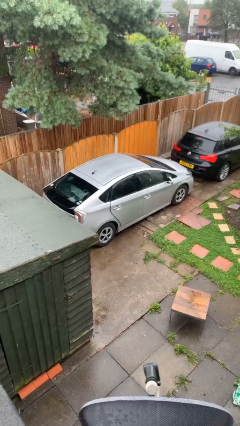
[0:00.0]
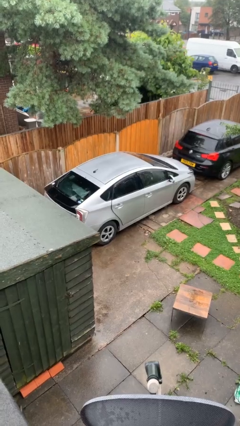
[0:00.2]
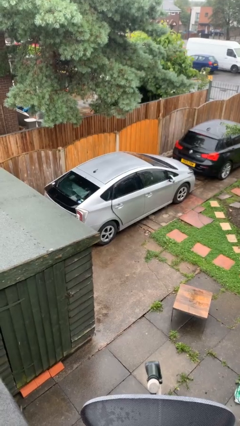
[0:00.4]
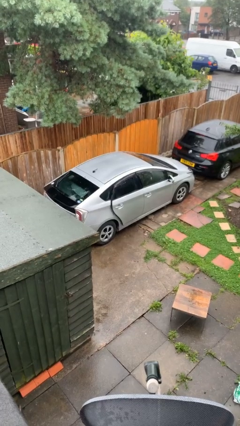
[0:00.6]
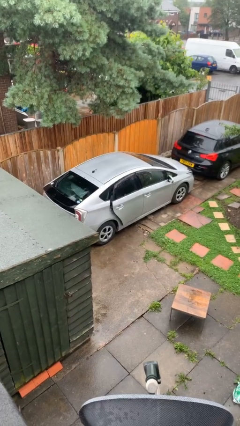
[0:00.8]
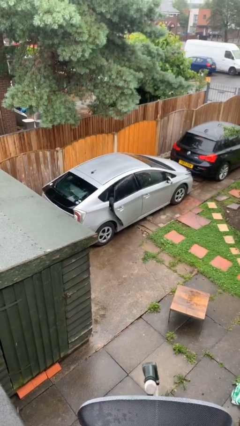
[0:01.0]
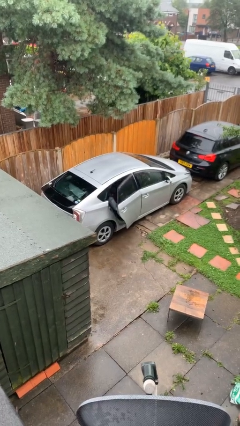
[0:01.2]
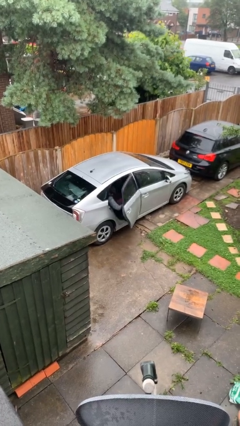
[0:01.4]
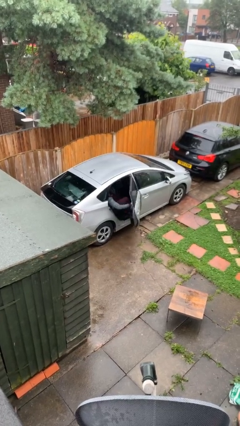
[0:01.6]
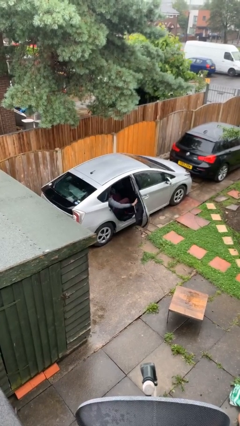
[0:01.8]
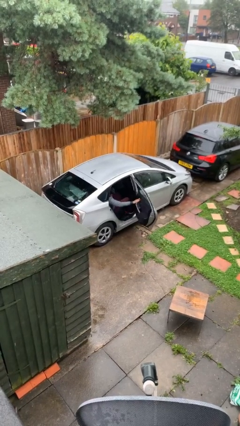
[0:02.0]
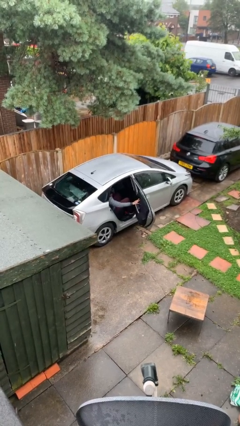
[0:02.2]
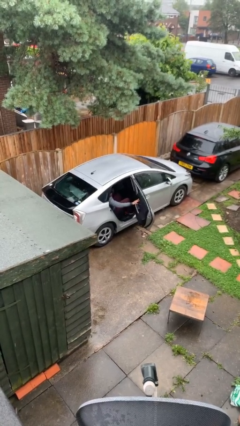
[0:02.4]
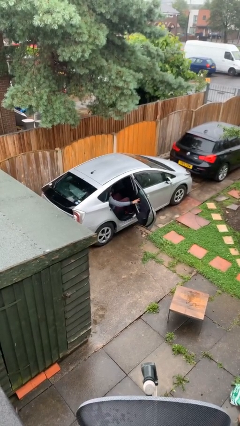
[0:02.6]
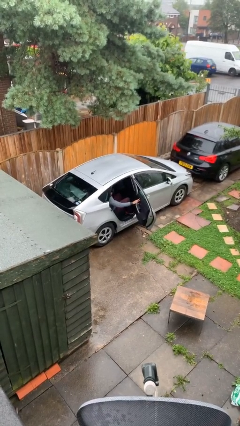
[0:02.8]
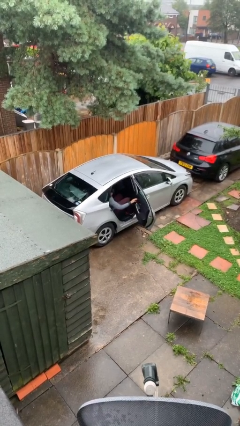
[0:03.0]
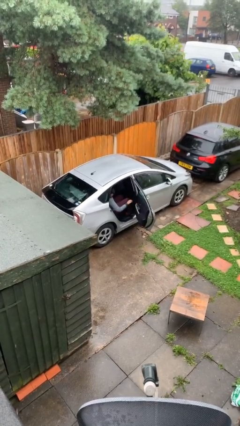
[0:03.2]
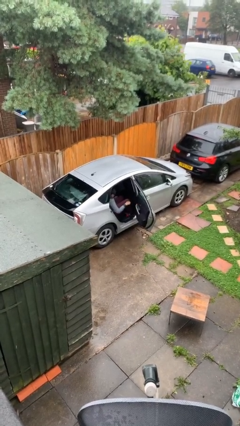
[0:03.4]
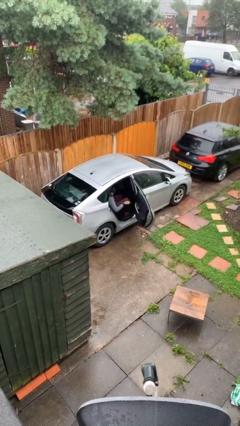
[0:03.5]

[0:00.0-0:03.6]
person opens car door

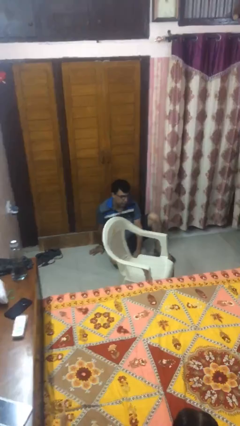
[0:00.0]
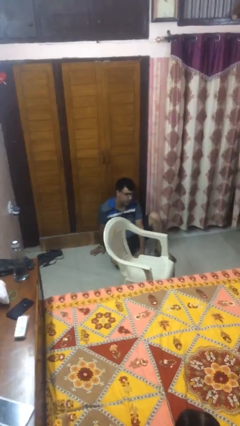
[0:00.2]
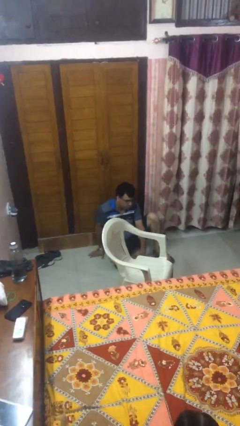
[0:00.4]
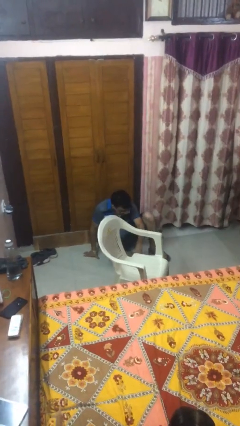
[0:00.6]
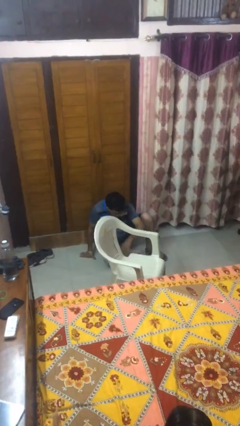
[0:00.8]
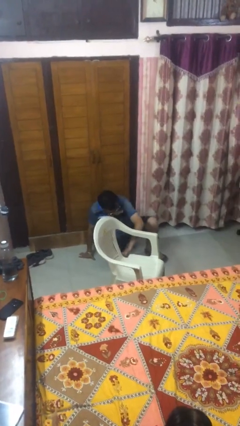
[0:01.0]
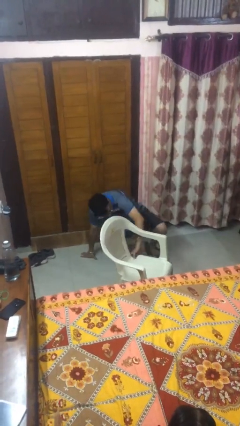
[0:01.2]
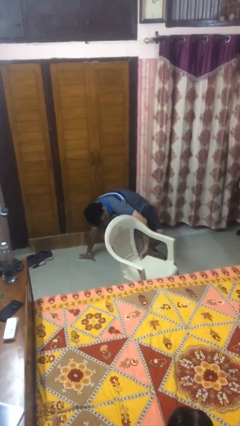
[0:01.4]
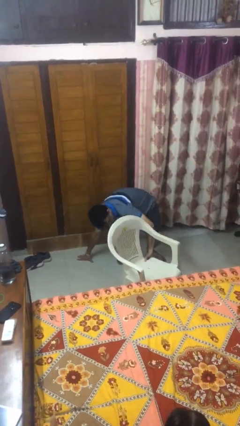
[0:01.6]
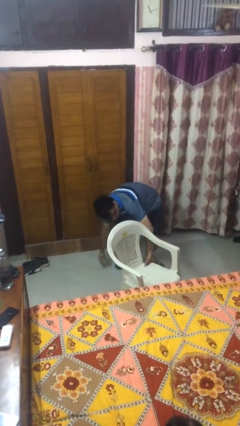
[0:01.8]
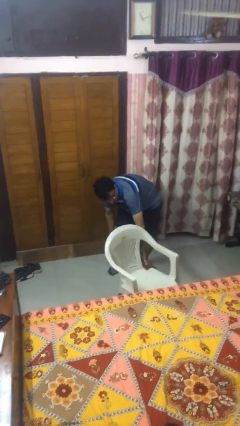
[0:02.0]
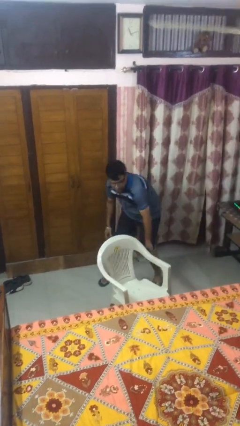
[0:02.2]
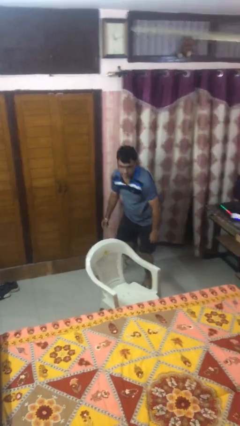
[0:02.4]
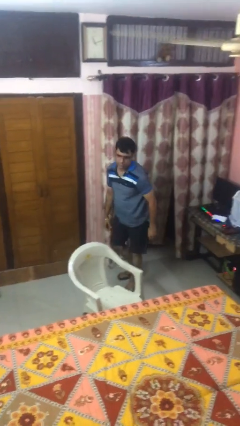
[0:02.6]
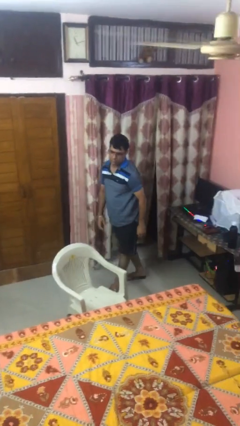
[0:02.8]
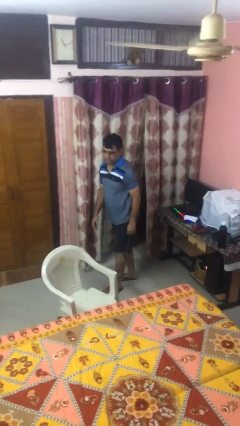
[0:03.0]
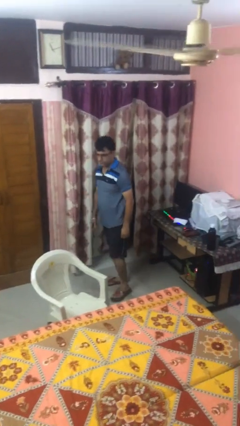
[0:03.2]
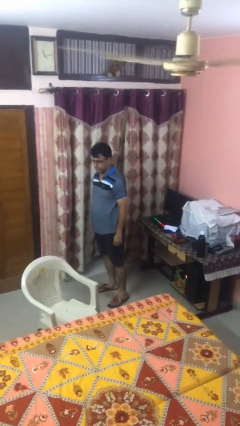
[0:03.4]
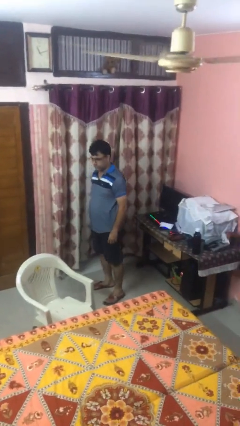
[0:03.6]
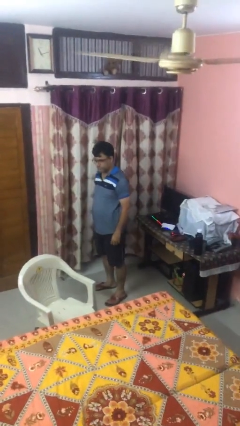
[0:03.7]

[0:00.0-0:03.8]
person stands up from floor

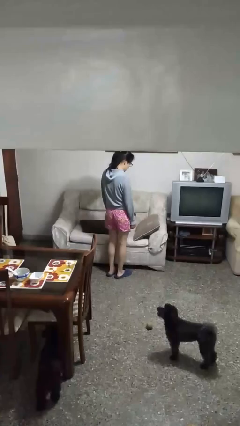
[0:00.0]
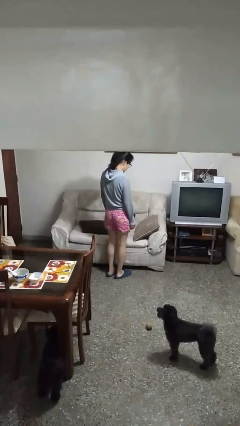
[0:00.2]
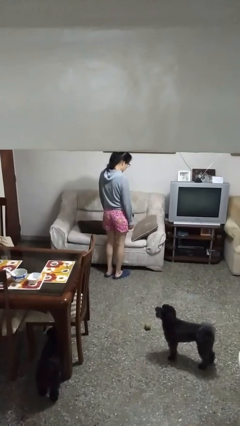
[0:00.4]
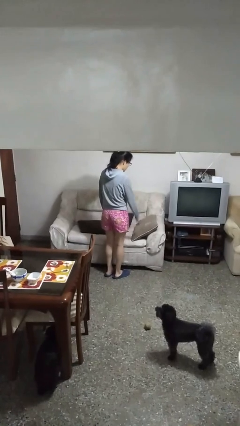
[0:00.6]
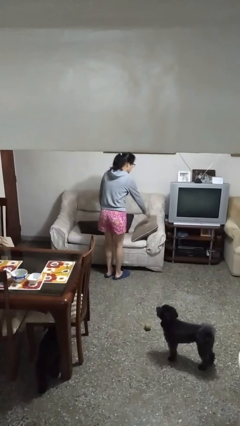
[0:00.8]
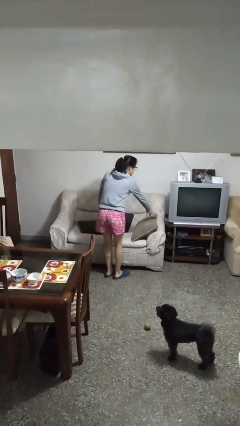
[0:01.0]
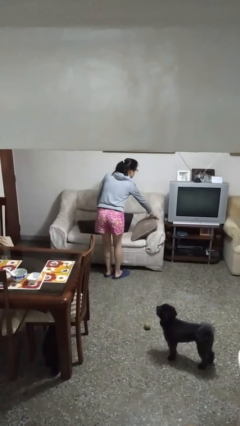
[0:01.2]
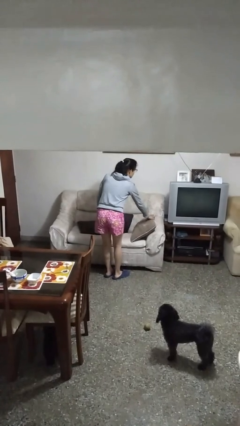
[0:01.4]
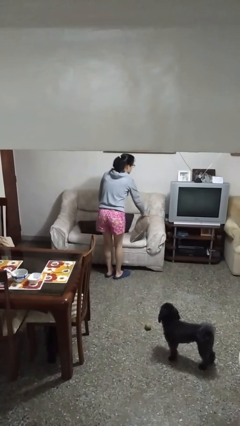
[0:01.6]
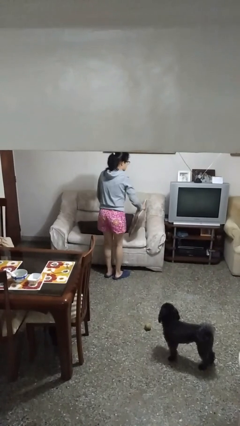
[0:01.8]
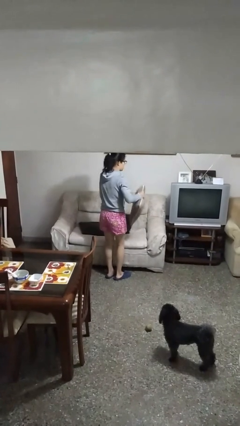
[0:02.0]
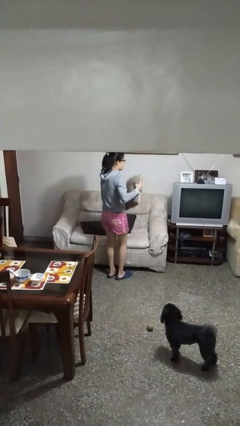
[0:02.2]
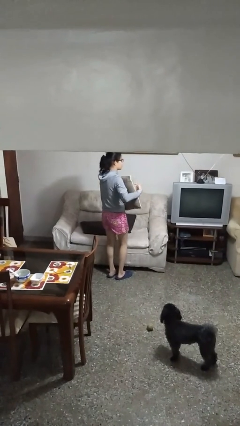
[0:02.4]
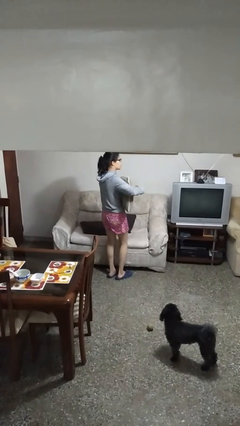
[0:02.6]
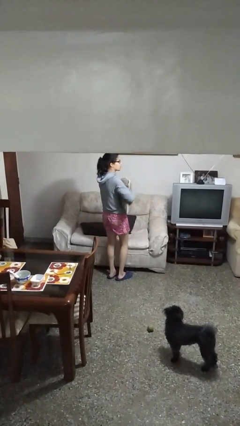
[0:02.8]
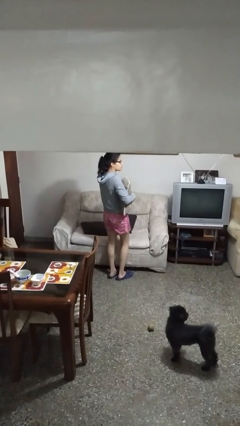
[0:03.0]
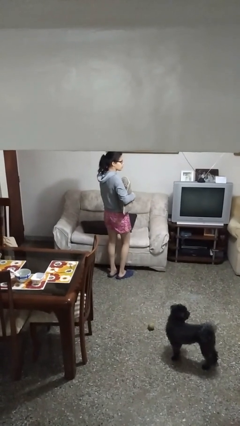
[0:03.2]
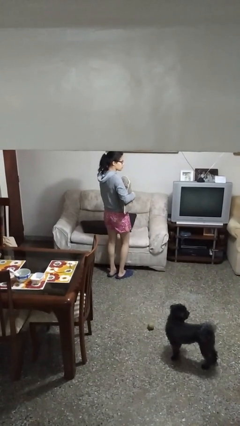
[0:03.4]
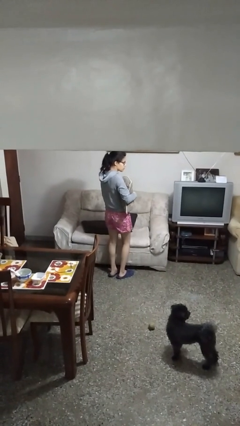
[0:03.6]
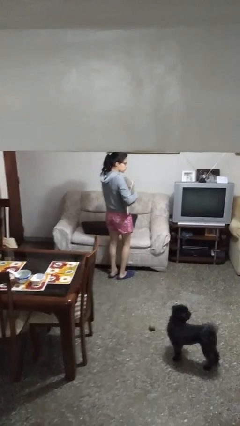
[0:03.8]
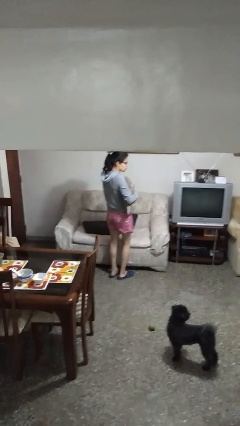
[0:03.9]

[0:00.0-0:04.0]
person picks up object from couch

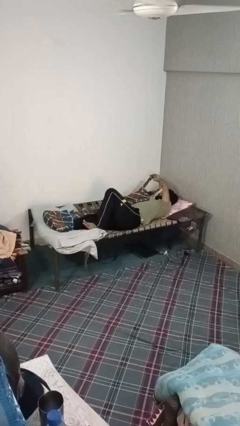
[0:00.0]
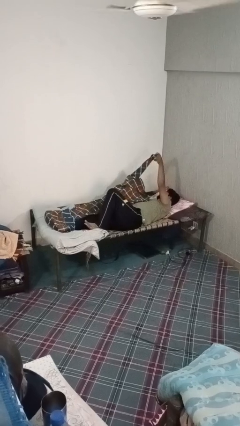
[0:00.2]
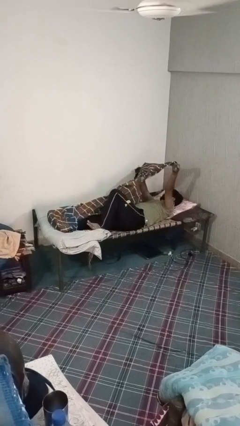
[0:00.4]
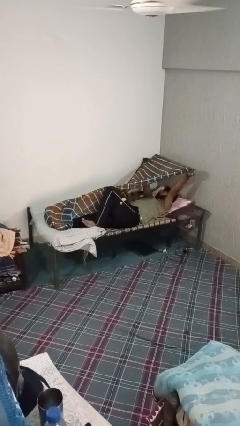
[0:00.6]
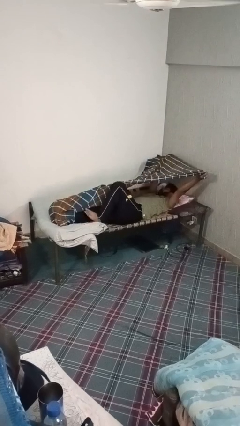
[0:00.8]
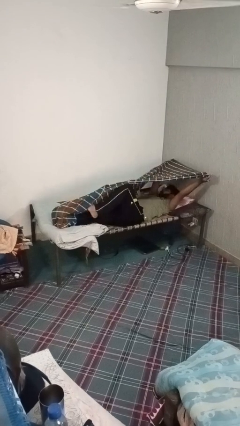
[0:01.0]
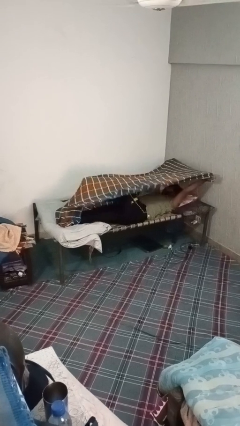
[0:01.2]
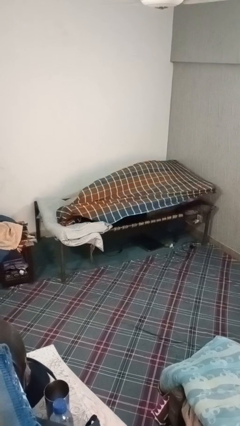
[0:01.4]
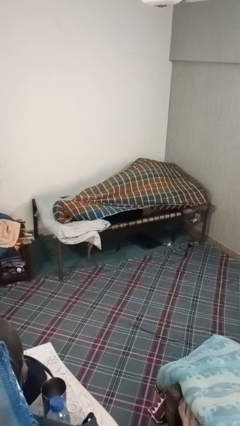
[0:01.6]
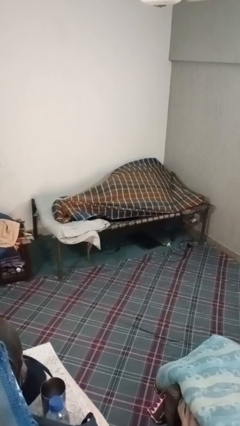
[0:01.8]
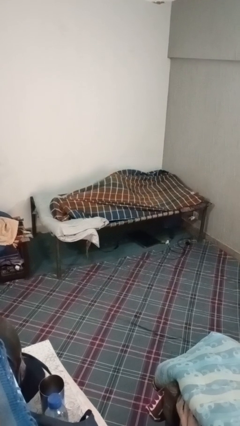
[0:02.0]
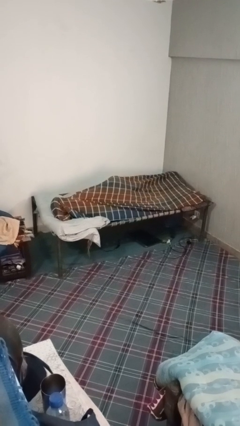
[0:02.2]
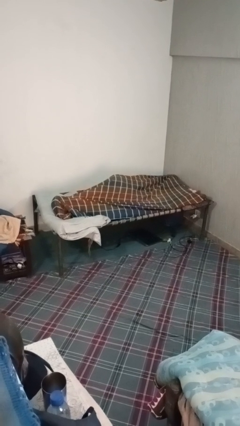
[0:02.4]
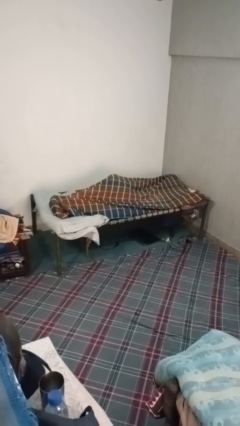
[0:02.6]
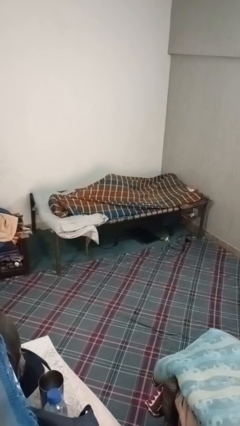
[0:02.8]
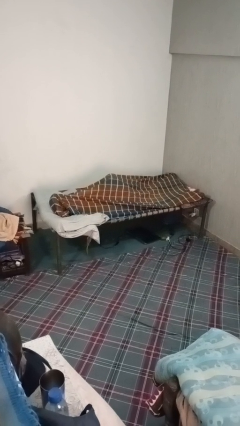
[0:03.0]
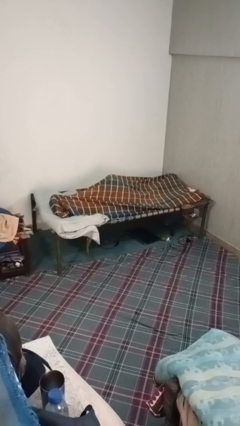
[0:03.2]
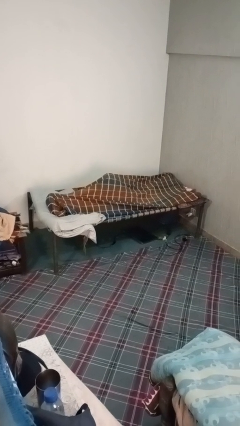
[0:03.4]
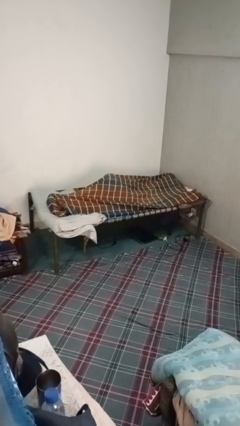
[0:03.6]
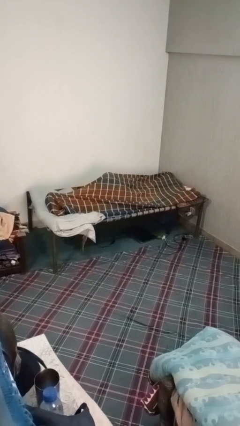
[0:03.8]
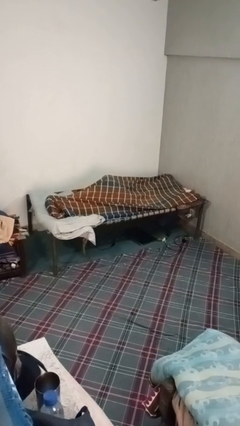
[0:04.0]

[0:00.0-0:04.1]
person covers with bedsheets

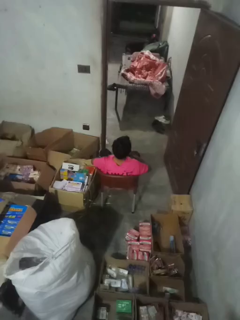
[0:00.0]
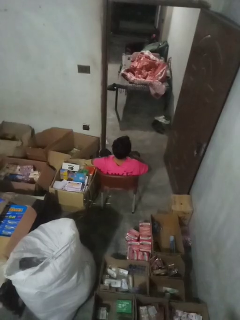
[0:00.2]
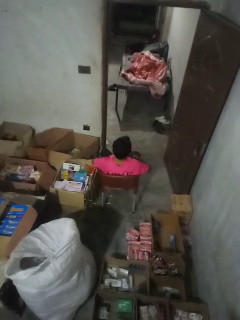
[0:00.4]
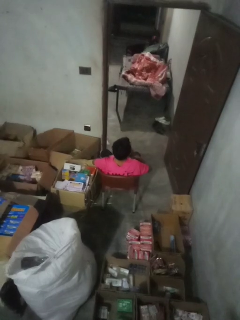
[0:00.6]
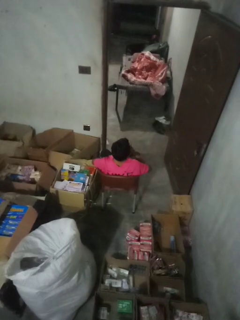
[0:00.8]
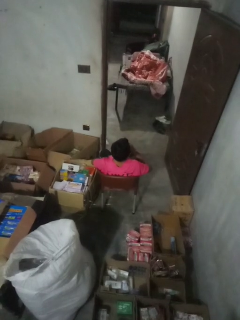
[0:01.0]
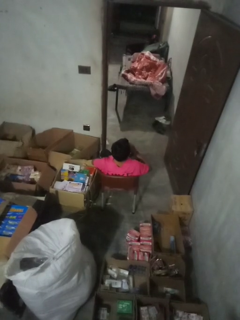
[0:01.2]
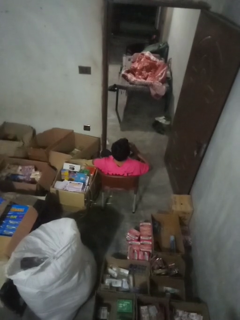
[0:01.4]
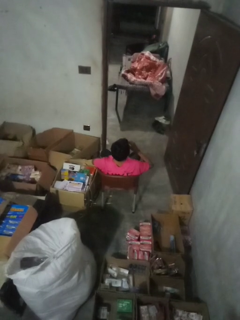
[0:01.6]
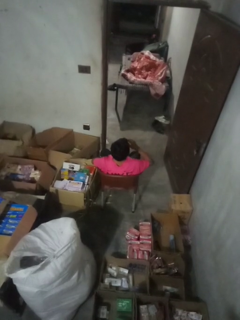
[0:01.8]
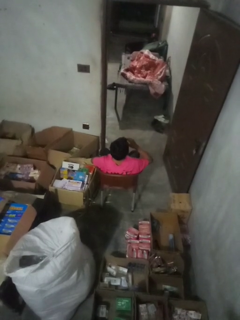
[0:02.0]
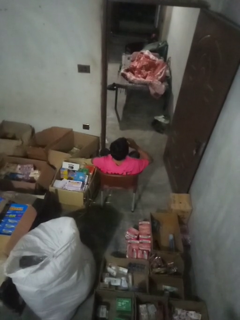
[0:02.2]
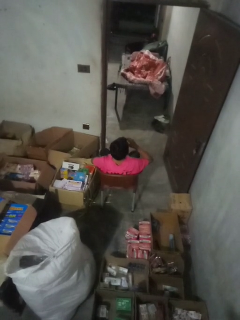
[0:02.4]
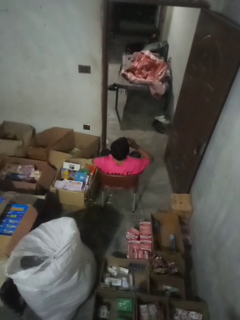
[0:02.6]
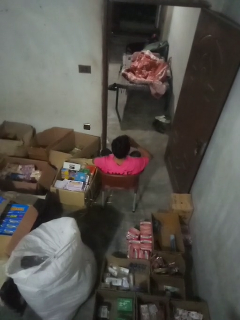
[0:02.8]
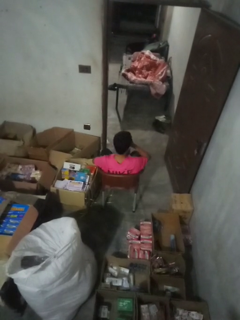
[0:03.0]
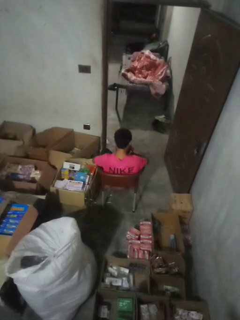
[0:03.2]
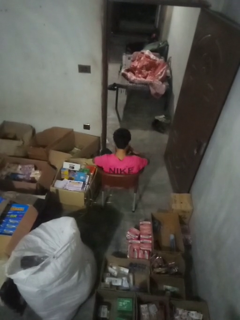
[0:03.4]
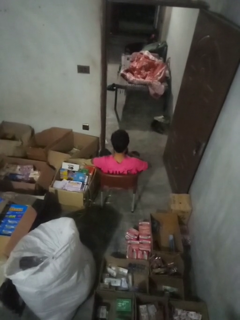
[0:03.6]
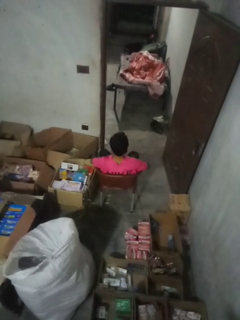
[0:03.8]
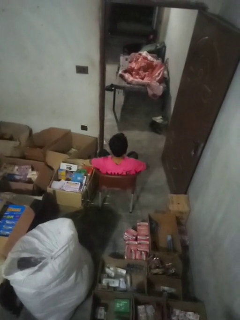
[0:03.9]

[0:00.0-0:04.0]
person sneezes into hand
